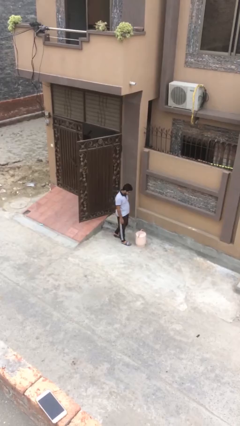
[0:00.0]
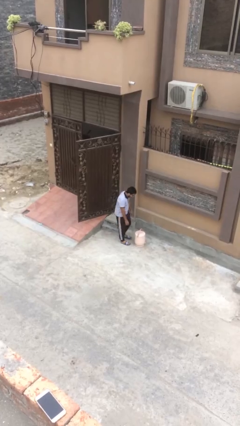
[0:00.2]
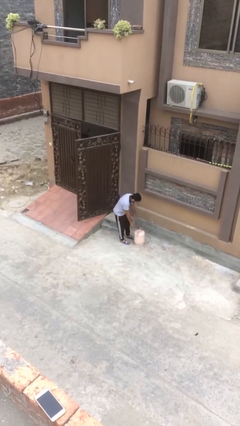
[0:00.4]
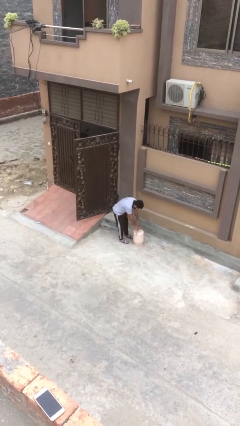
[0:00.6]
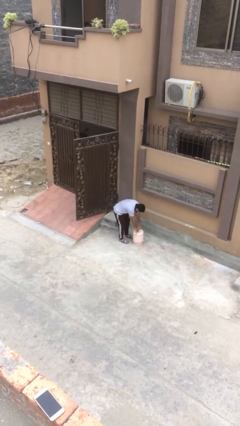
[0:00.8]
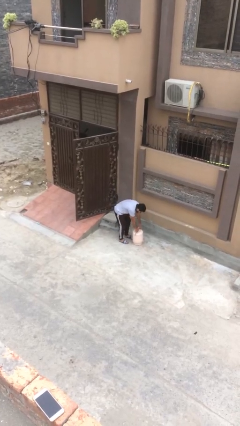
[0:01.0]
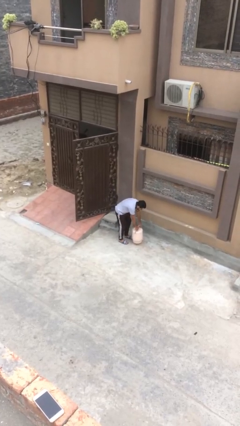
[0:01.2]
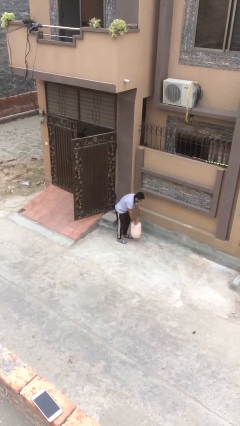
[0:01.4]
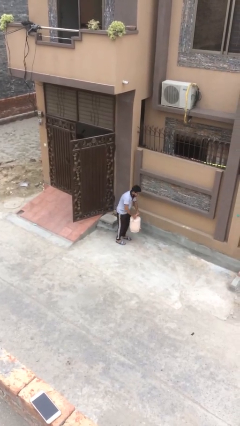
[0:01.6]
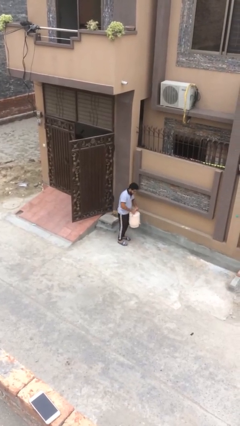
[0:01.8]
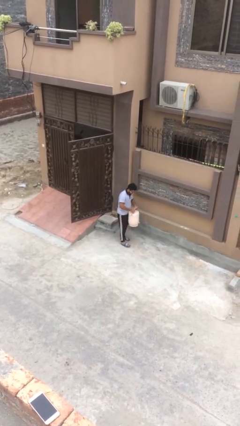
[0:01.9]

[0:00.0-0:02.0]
person picks up object from floor

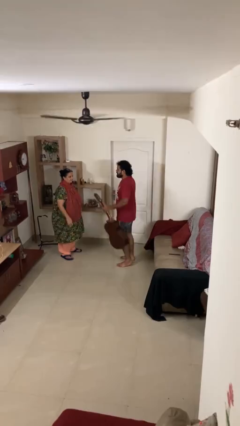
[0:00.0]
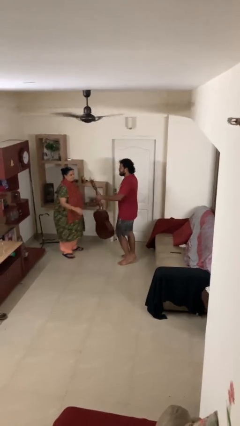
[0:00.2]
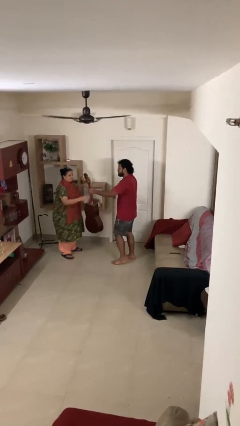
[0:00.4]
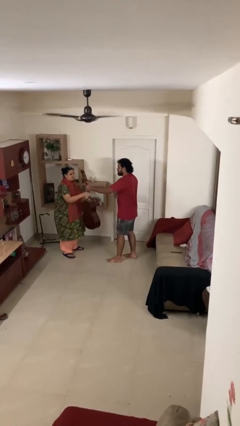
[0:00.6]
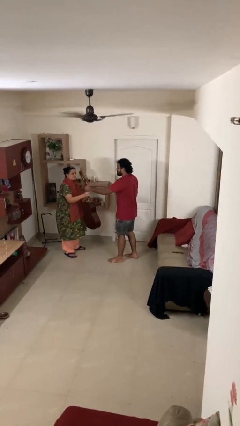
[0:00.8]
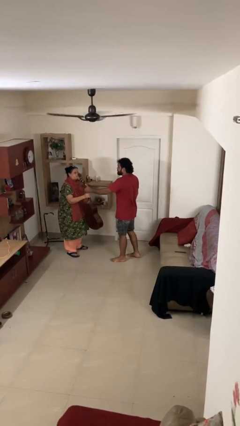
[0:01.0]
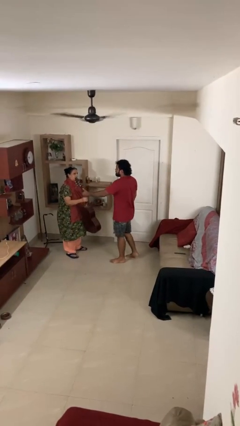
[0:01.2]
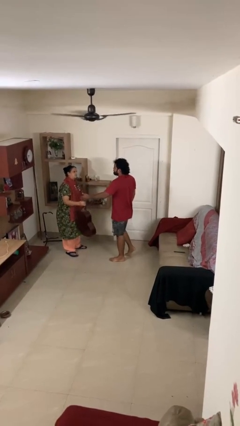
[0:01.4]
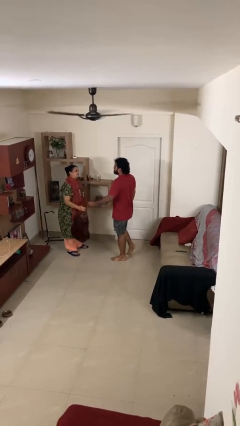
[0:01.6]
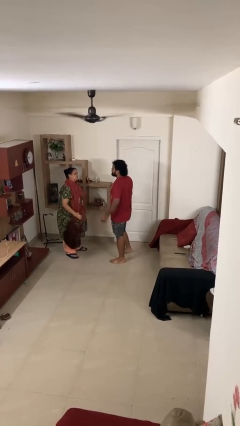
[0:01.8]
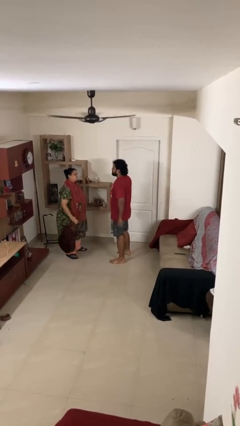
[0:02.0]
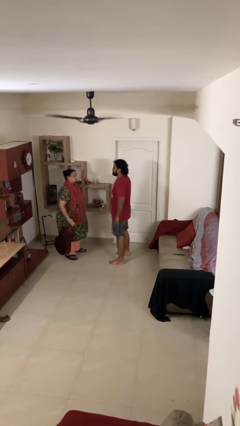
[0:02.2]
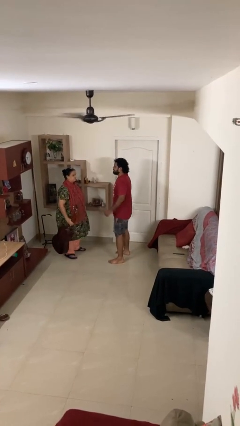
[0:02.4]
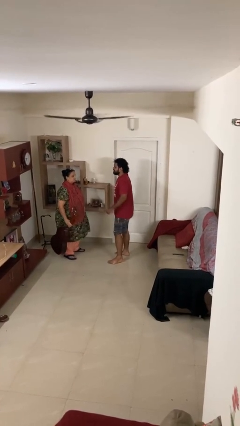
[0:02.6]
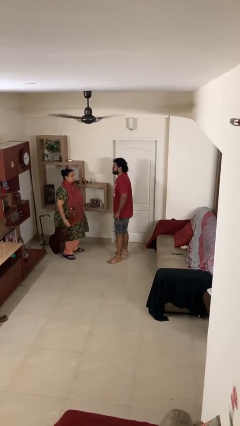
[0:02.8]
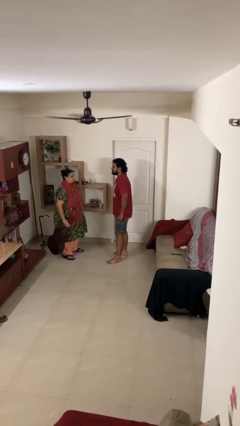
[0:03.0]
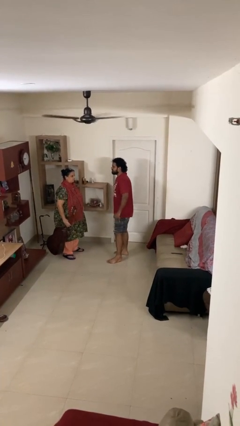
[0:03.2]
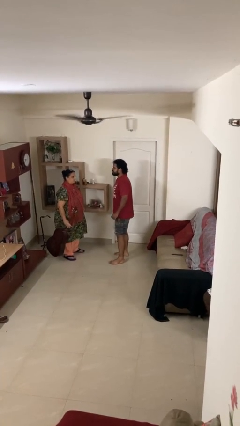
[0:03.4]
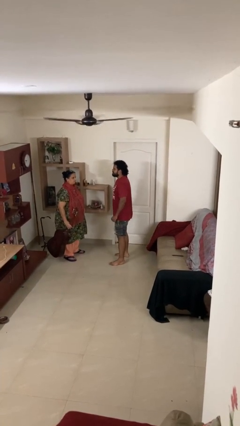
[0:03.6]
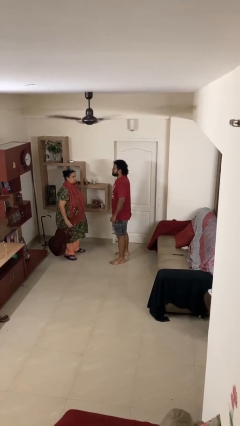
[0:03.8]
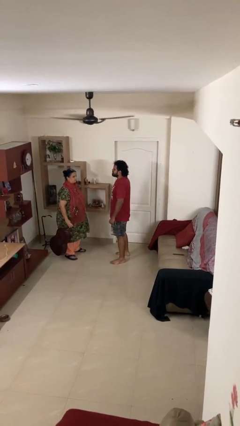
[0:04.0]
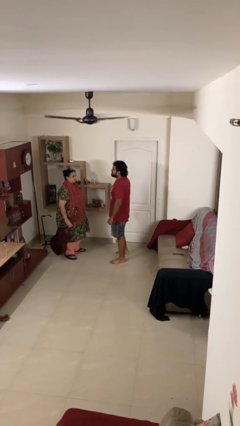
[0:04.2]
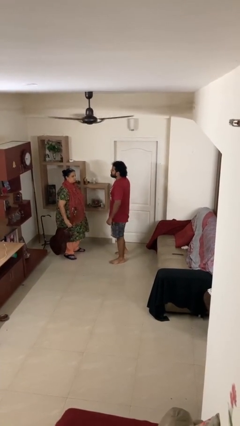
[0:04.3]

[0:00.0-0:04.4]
person transfers object to person

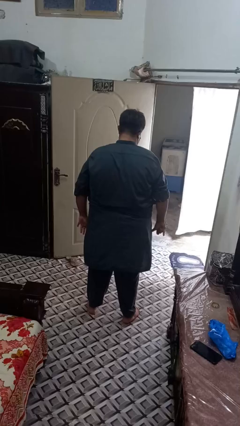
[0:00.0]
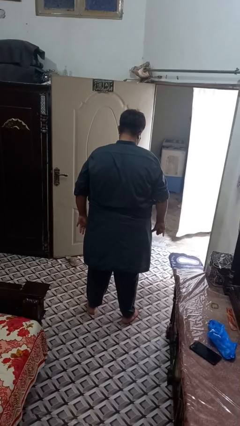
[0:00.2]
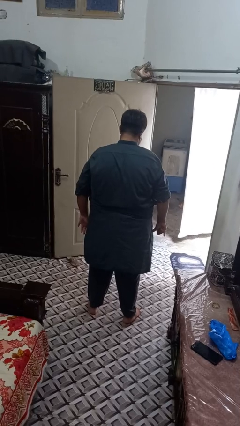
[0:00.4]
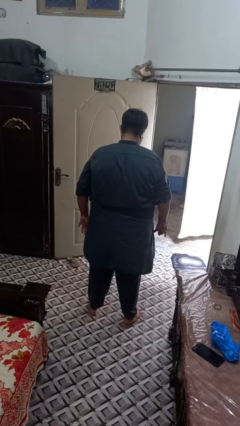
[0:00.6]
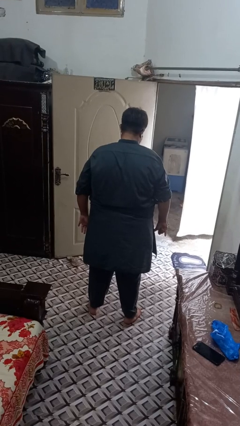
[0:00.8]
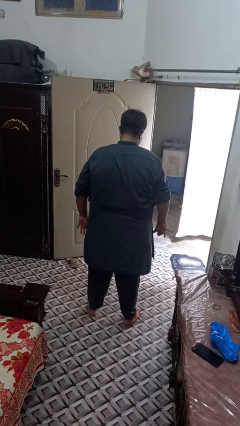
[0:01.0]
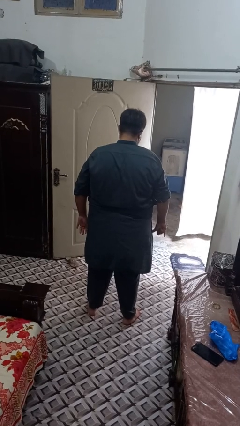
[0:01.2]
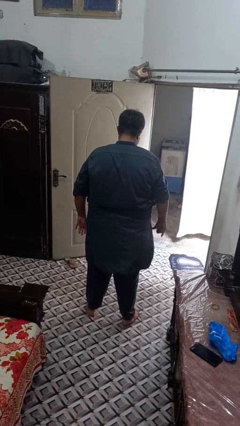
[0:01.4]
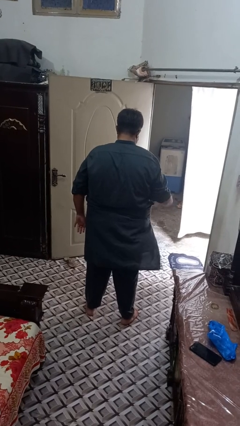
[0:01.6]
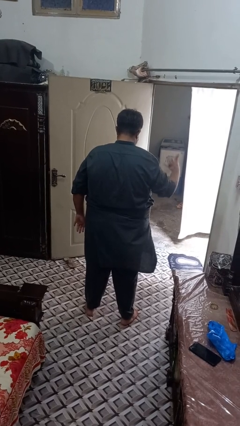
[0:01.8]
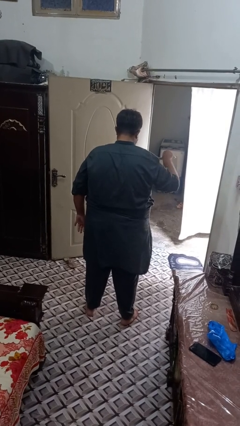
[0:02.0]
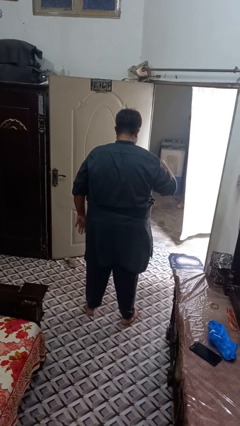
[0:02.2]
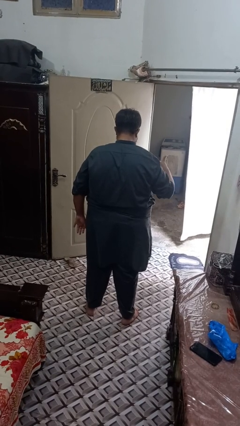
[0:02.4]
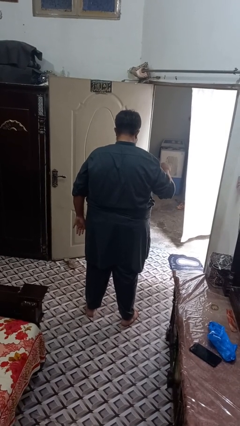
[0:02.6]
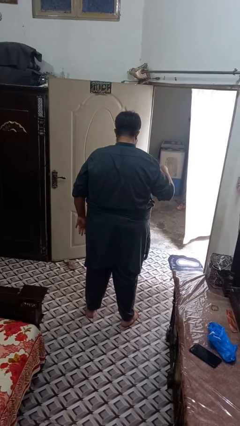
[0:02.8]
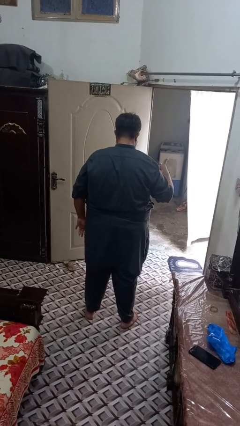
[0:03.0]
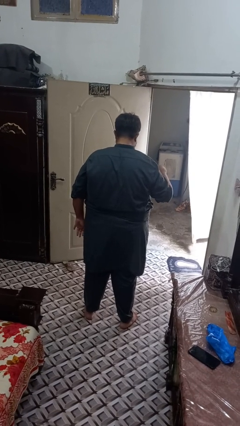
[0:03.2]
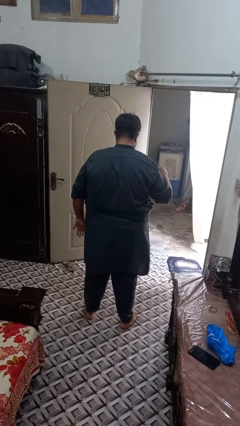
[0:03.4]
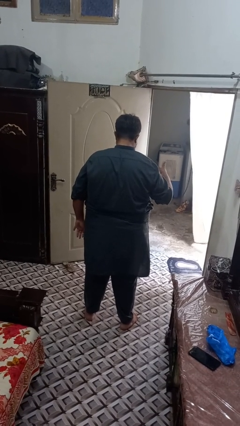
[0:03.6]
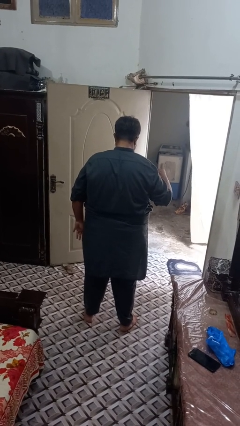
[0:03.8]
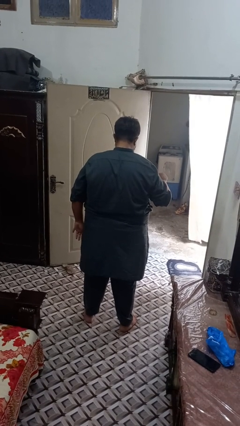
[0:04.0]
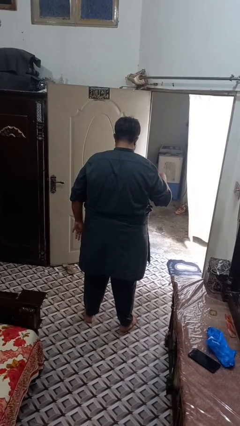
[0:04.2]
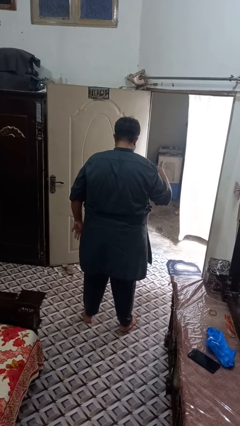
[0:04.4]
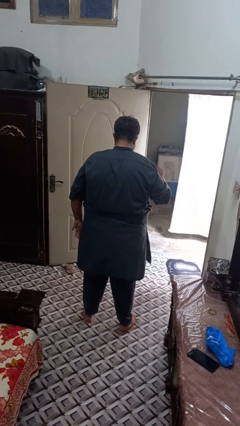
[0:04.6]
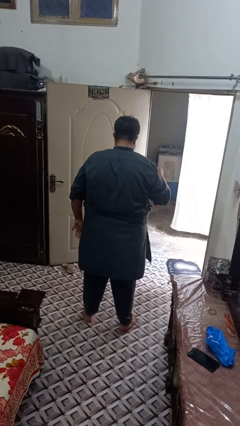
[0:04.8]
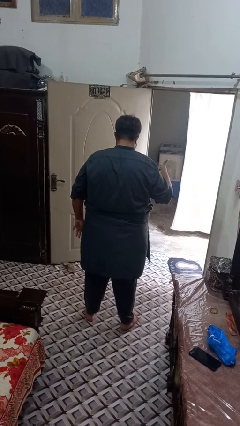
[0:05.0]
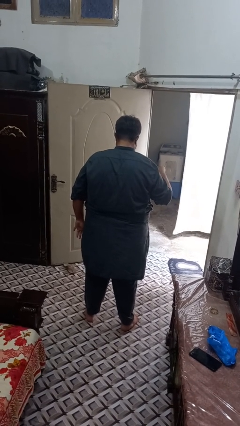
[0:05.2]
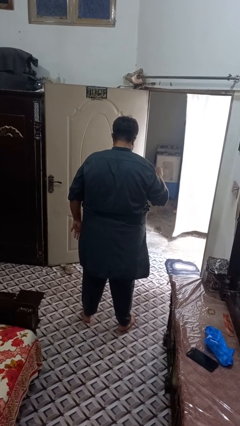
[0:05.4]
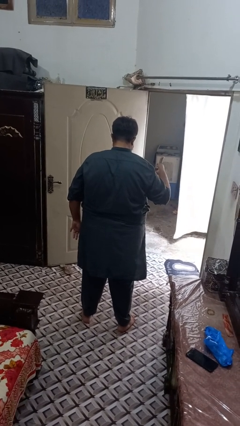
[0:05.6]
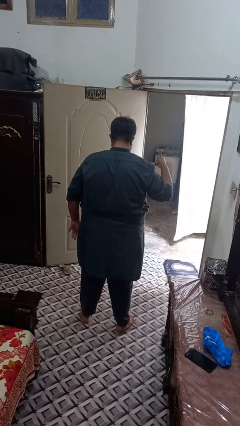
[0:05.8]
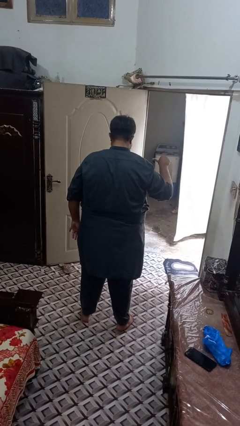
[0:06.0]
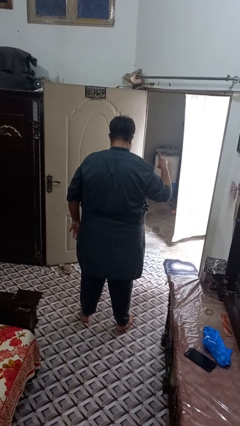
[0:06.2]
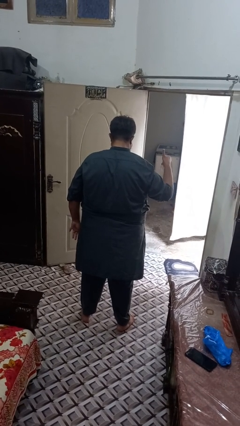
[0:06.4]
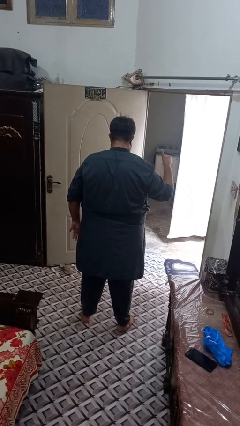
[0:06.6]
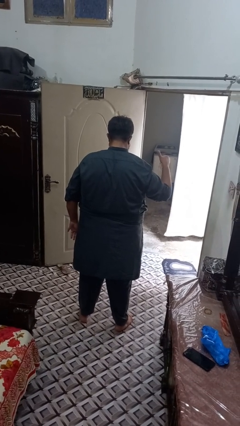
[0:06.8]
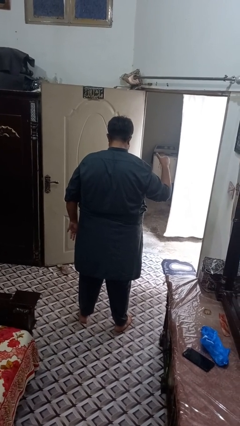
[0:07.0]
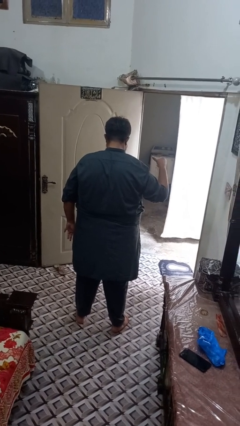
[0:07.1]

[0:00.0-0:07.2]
person gestures hang loose

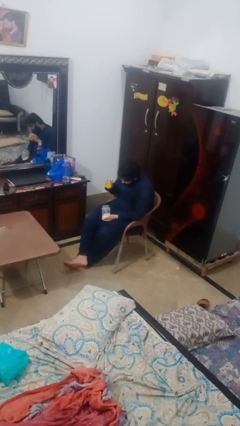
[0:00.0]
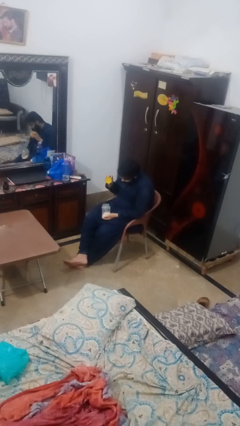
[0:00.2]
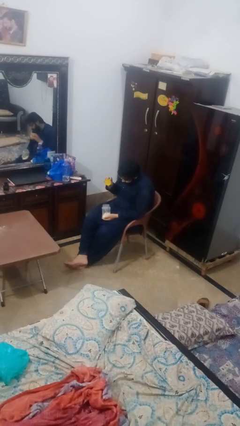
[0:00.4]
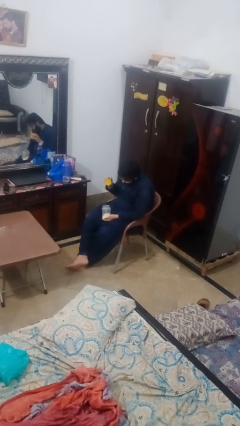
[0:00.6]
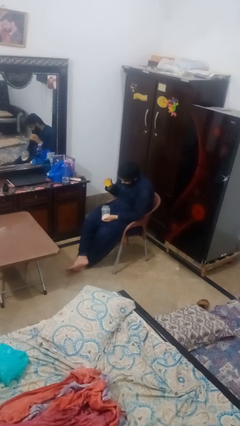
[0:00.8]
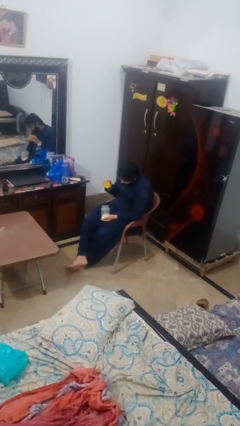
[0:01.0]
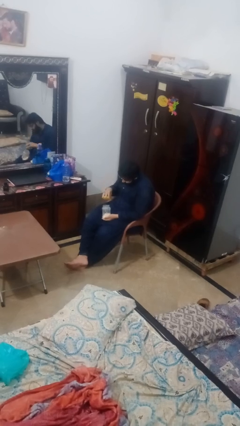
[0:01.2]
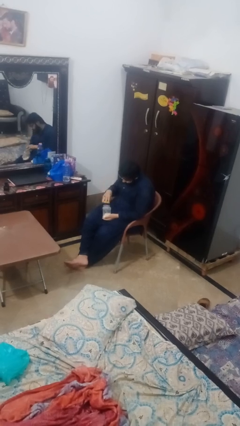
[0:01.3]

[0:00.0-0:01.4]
person opens jar

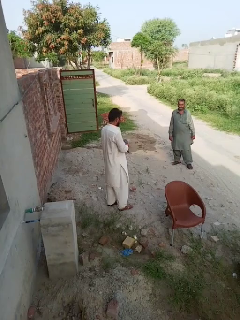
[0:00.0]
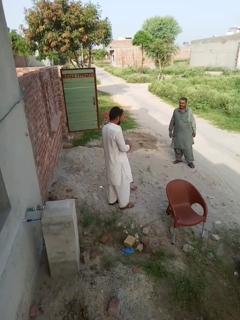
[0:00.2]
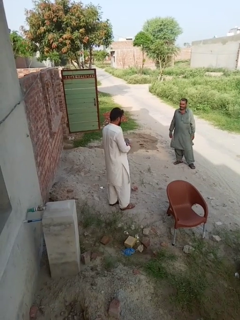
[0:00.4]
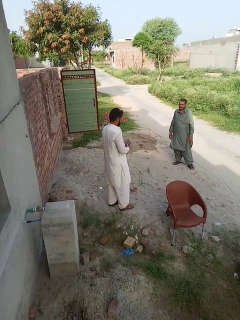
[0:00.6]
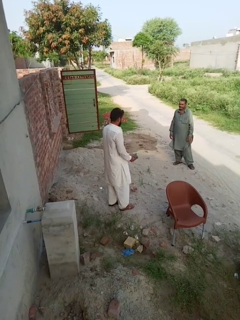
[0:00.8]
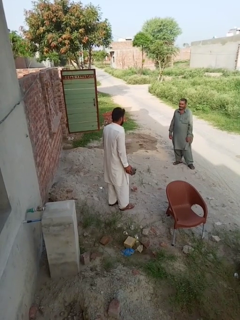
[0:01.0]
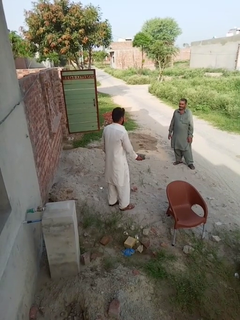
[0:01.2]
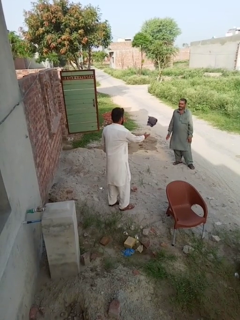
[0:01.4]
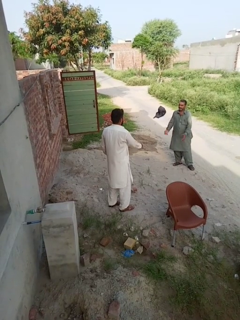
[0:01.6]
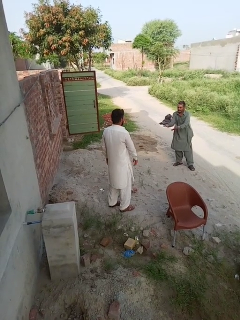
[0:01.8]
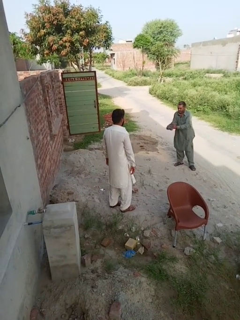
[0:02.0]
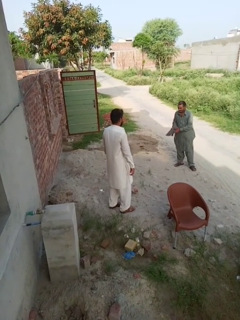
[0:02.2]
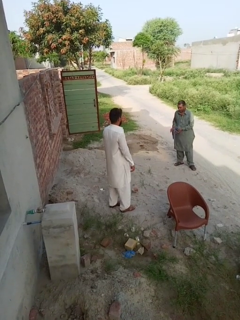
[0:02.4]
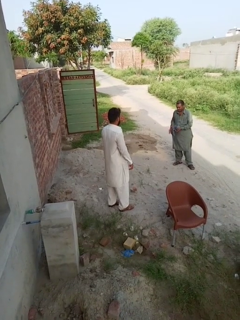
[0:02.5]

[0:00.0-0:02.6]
person throws object to person

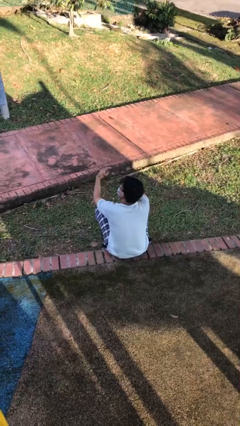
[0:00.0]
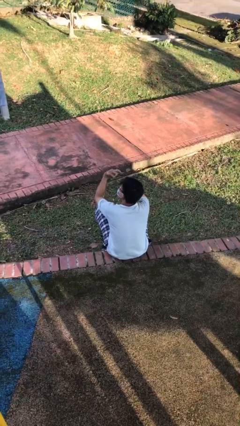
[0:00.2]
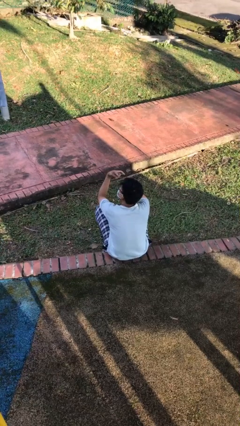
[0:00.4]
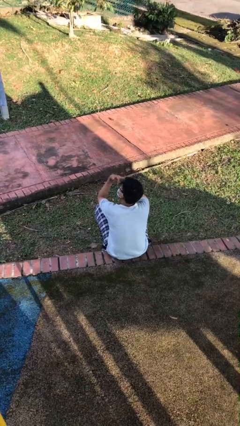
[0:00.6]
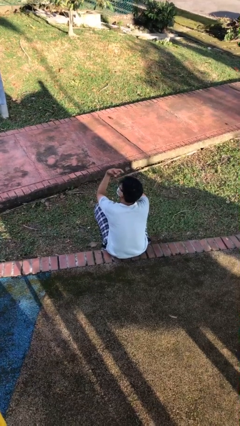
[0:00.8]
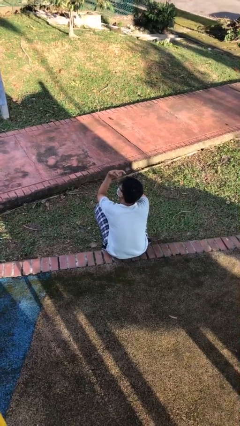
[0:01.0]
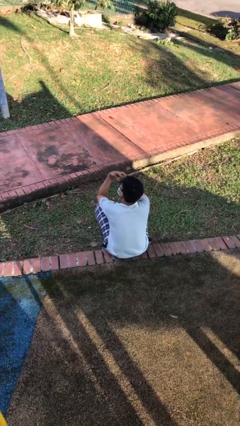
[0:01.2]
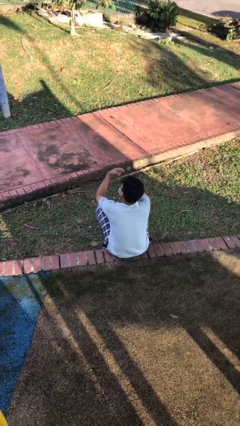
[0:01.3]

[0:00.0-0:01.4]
person gestures watch closely
